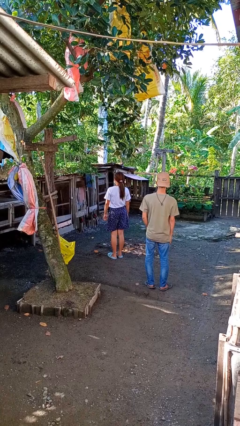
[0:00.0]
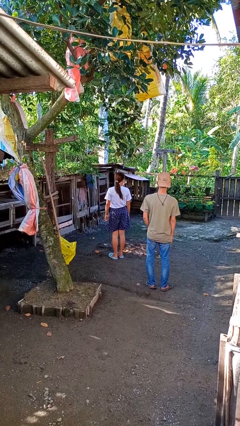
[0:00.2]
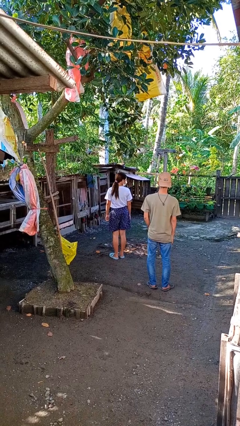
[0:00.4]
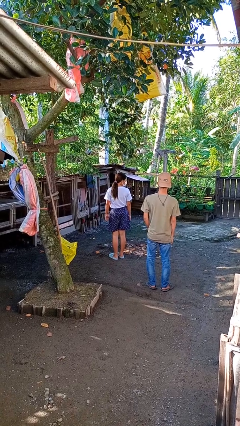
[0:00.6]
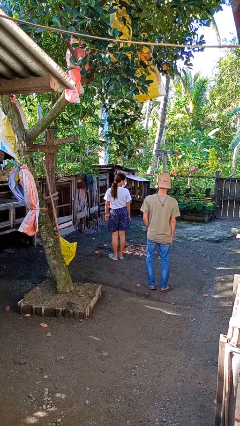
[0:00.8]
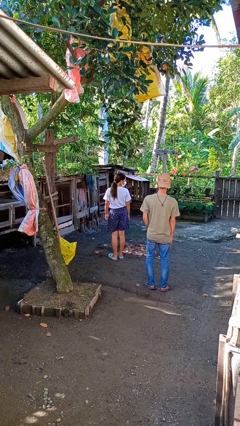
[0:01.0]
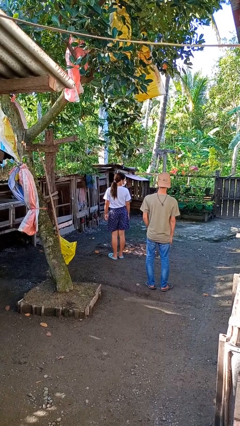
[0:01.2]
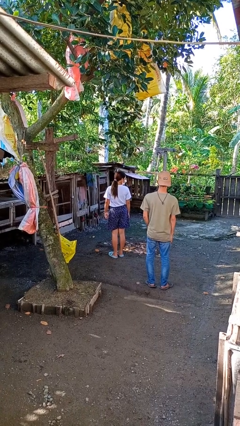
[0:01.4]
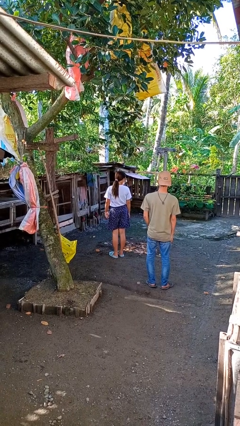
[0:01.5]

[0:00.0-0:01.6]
person looks over shoulder

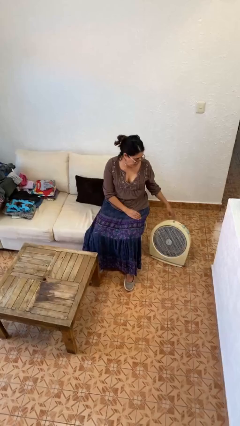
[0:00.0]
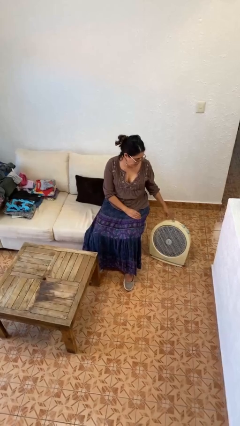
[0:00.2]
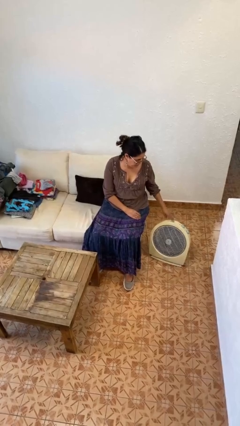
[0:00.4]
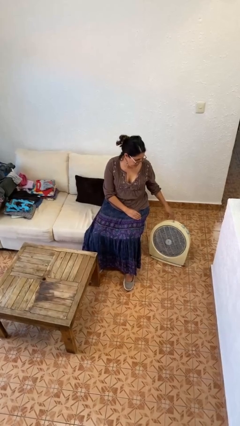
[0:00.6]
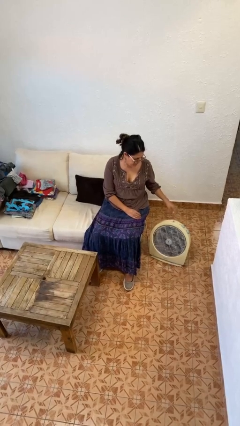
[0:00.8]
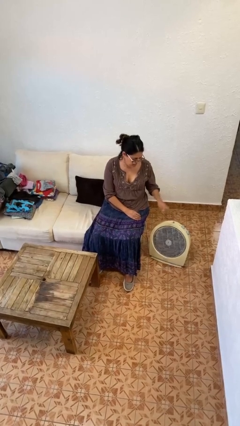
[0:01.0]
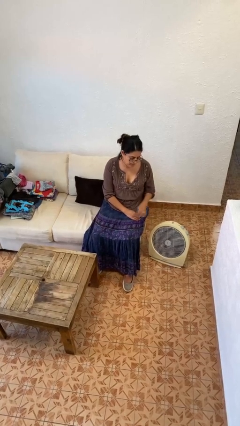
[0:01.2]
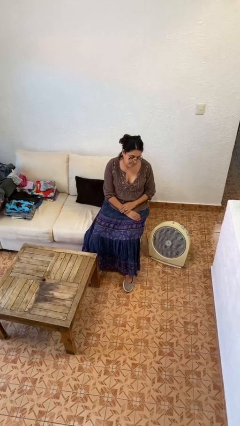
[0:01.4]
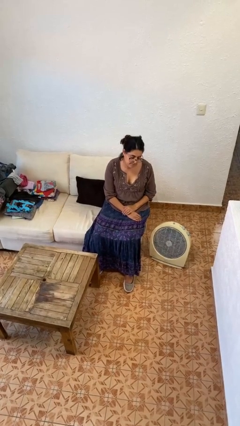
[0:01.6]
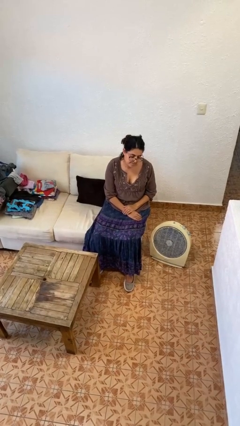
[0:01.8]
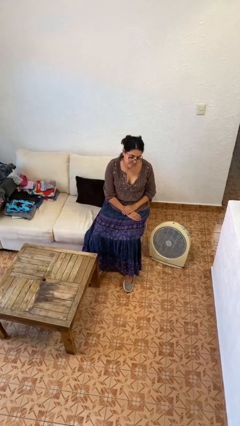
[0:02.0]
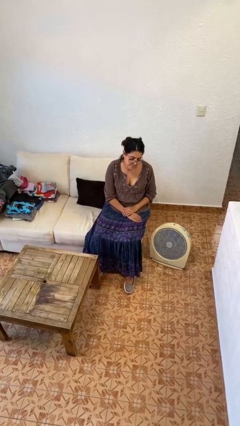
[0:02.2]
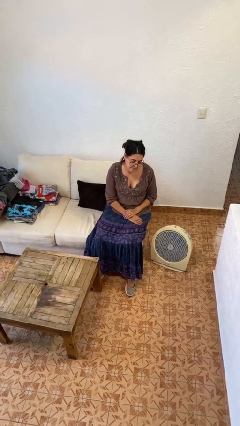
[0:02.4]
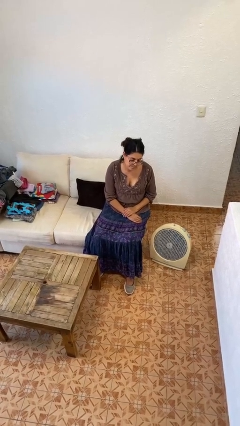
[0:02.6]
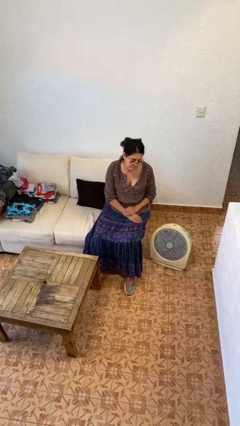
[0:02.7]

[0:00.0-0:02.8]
person turns on fan

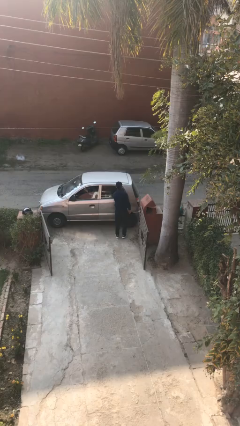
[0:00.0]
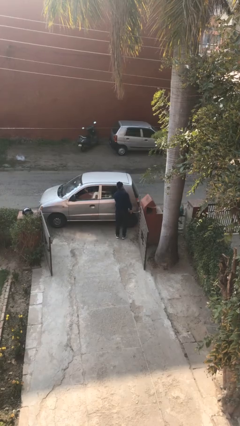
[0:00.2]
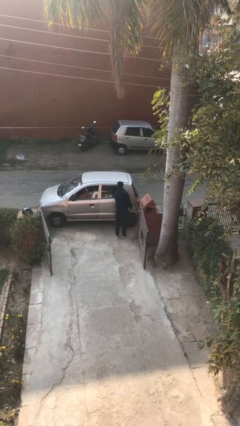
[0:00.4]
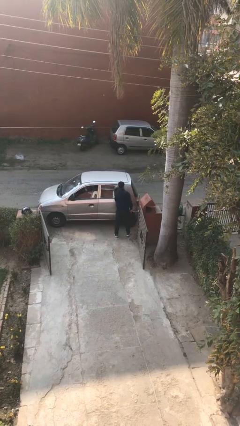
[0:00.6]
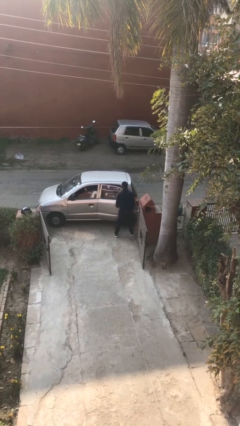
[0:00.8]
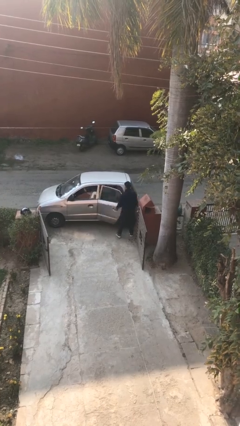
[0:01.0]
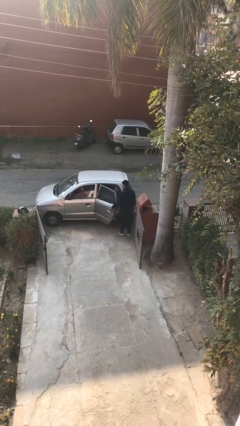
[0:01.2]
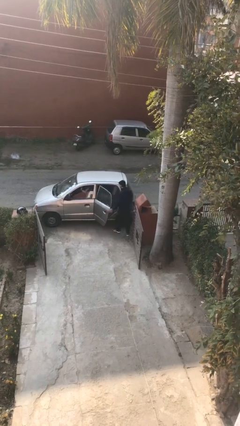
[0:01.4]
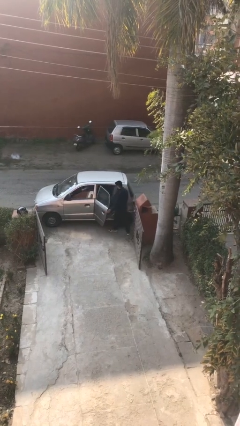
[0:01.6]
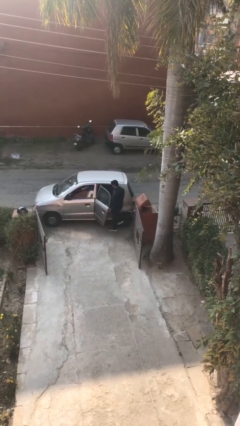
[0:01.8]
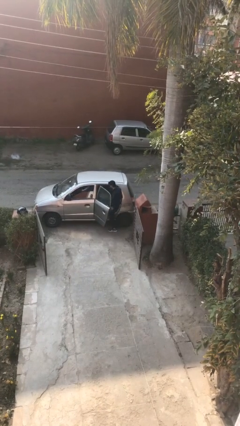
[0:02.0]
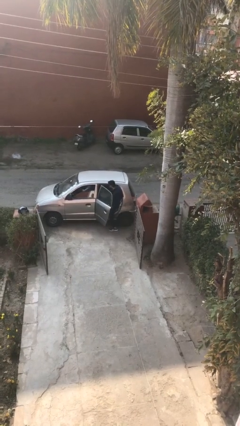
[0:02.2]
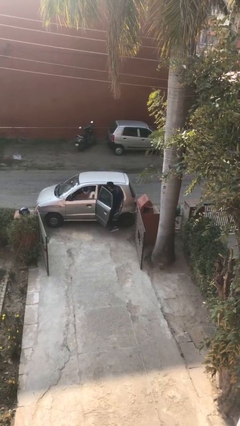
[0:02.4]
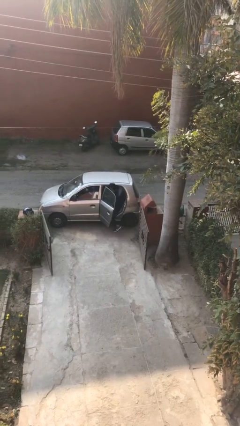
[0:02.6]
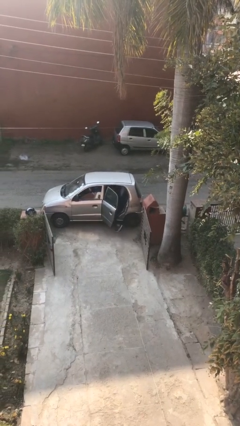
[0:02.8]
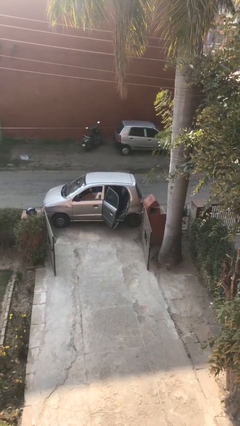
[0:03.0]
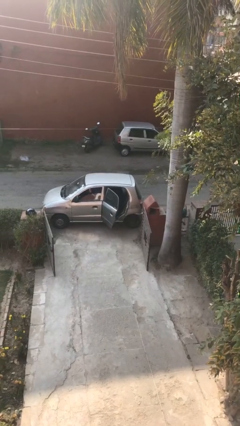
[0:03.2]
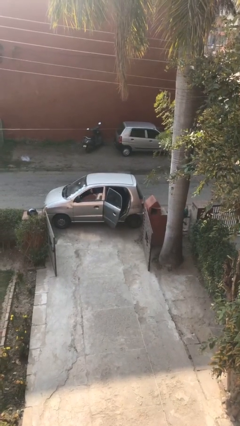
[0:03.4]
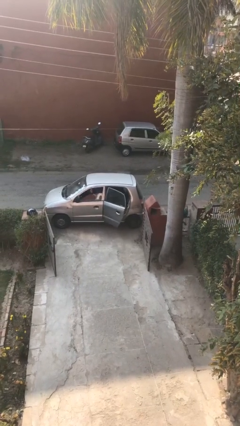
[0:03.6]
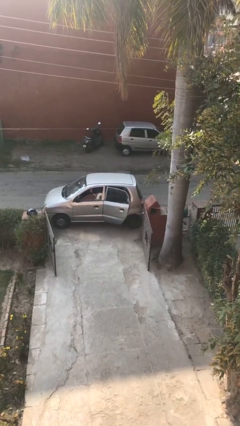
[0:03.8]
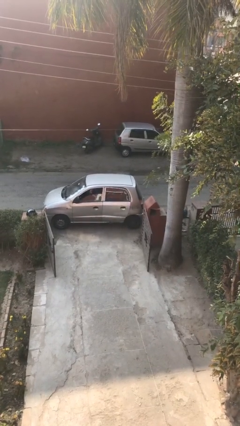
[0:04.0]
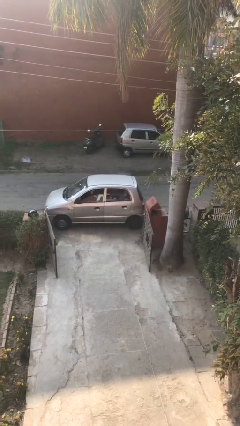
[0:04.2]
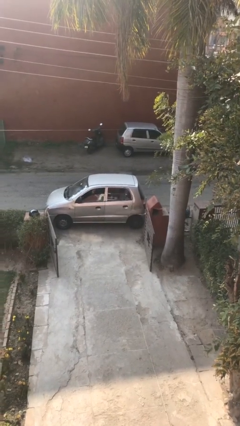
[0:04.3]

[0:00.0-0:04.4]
car picks up person

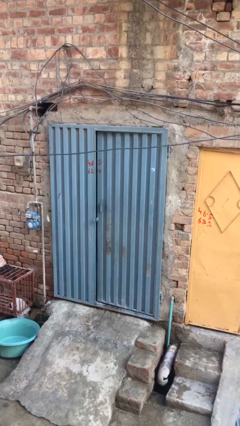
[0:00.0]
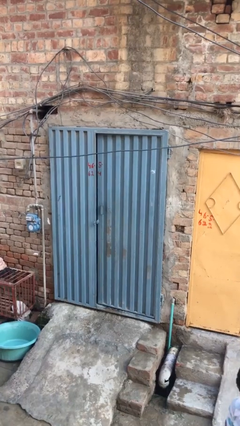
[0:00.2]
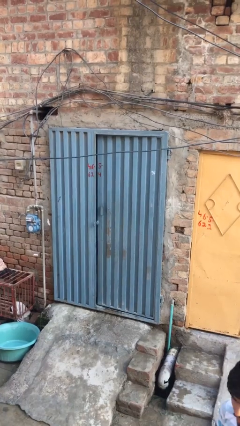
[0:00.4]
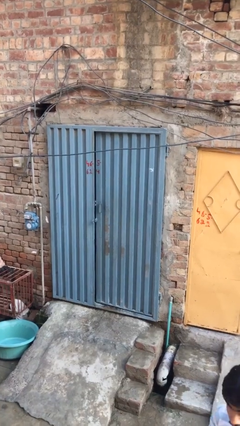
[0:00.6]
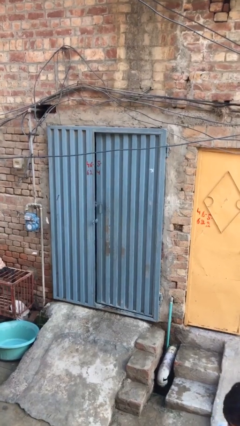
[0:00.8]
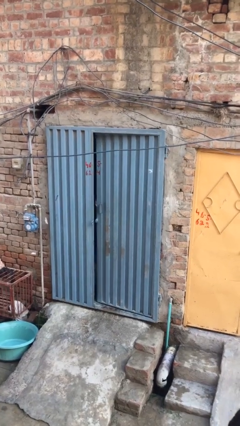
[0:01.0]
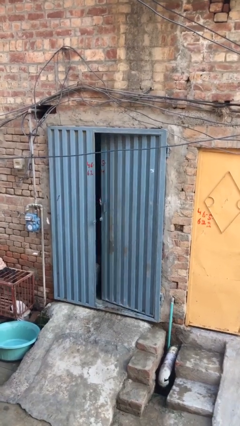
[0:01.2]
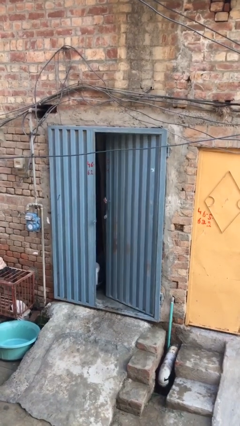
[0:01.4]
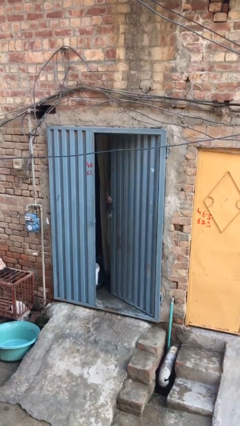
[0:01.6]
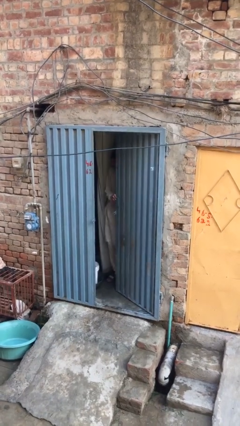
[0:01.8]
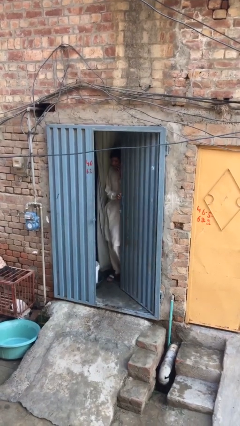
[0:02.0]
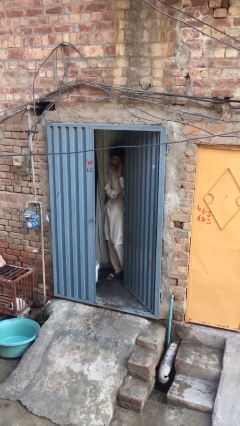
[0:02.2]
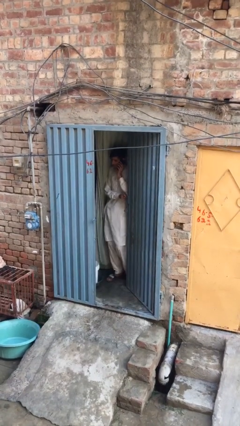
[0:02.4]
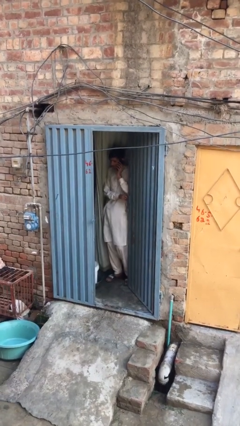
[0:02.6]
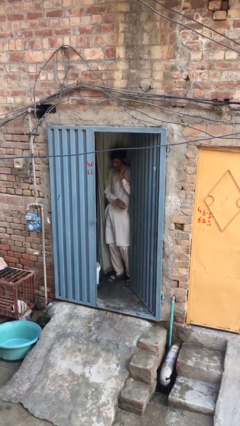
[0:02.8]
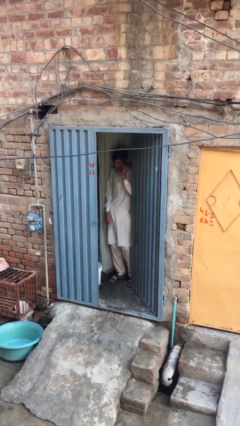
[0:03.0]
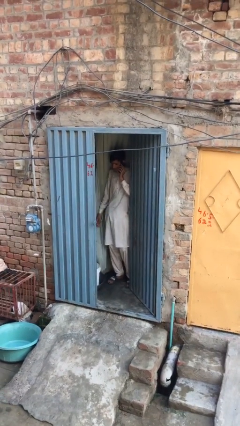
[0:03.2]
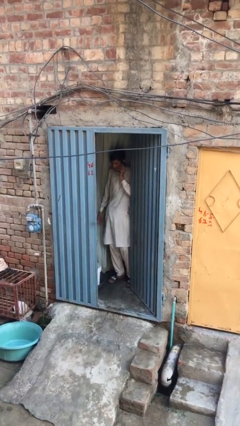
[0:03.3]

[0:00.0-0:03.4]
person opens facility door

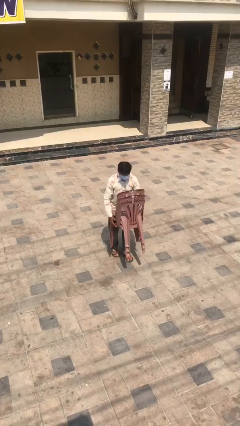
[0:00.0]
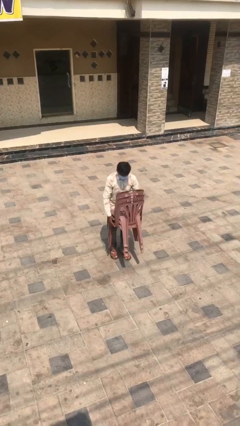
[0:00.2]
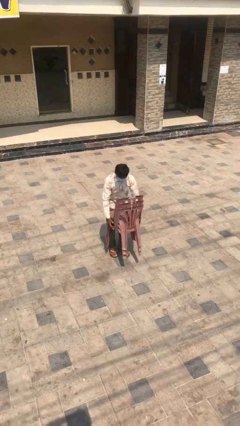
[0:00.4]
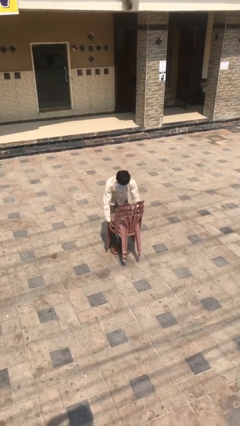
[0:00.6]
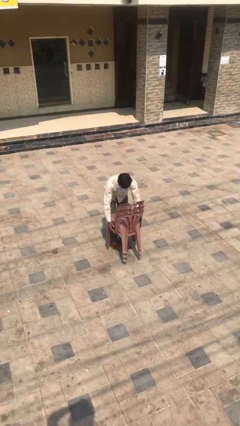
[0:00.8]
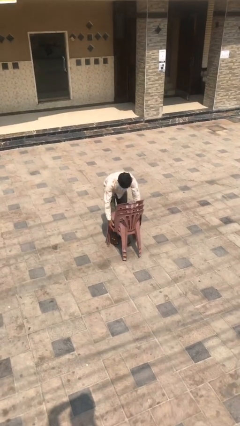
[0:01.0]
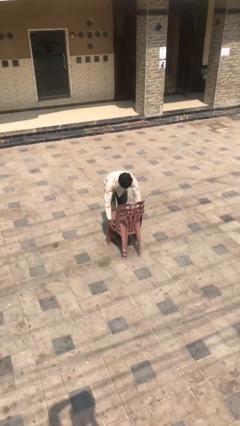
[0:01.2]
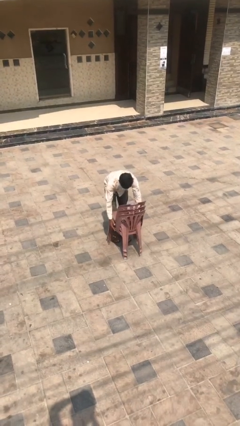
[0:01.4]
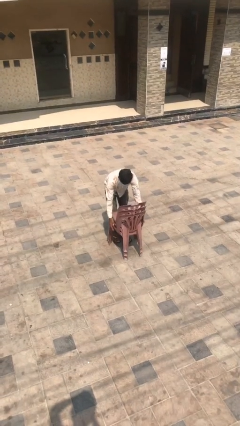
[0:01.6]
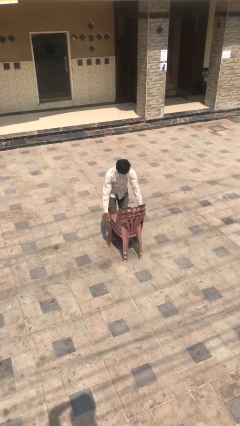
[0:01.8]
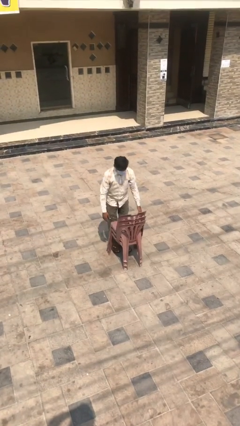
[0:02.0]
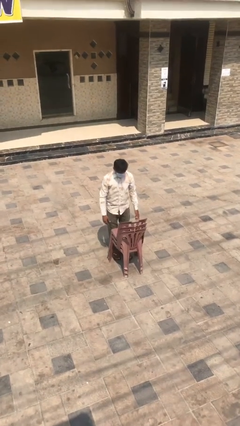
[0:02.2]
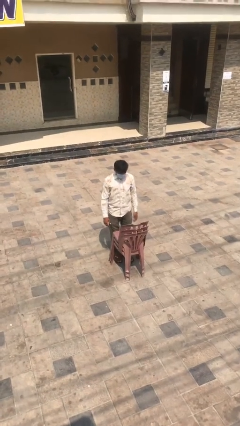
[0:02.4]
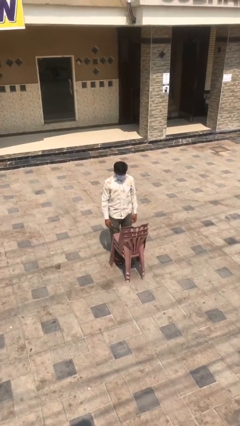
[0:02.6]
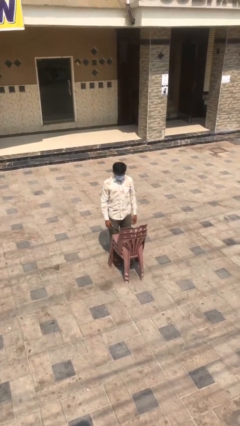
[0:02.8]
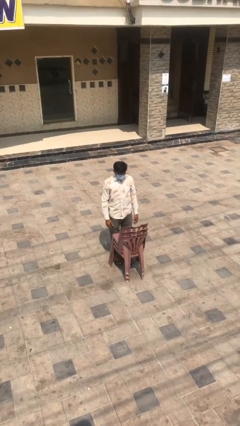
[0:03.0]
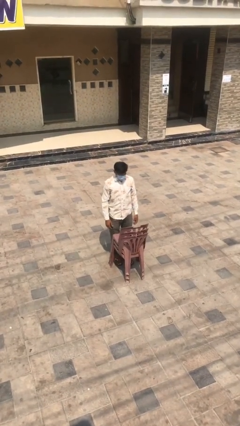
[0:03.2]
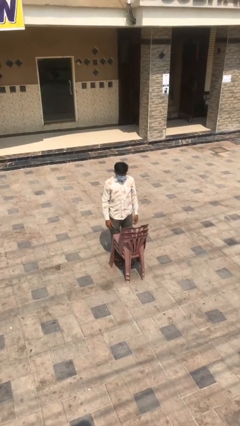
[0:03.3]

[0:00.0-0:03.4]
person puts down object on floor

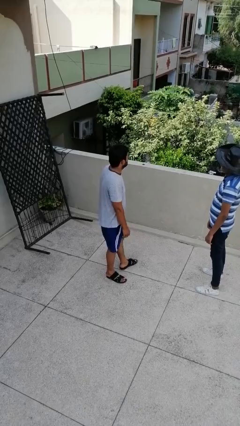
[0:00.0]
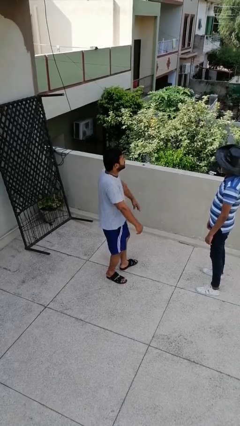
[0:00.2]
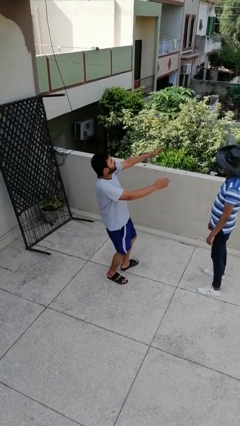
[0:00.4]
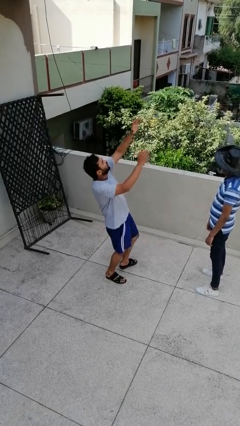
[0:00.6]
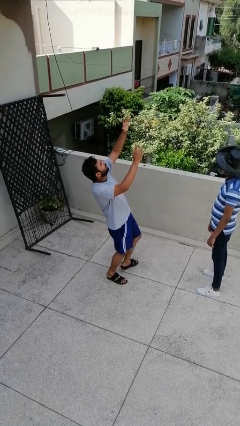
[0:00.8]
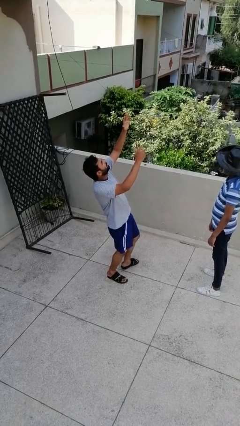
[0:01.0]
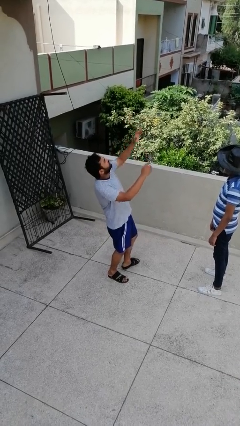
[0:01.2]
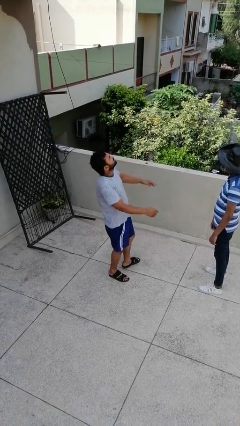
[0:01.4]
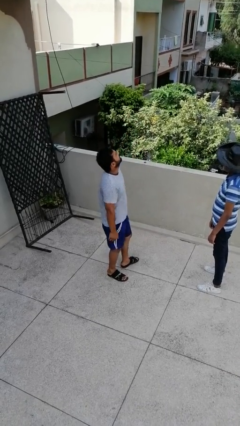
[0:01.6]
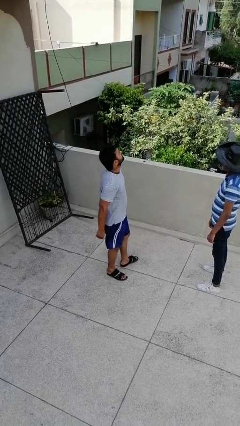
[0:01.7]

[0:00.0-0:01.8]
person laughs with person

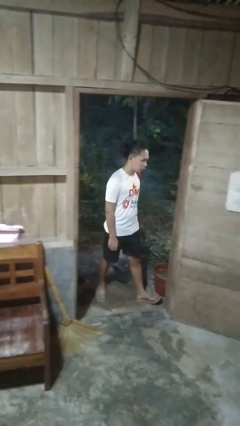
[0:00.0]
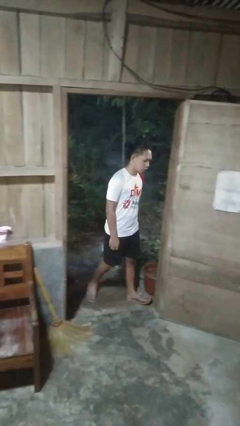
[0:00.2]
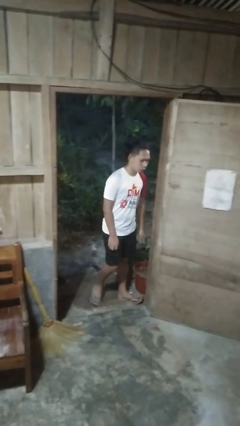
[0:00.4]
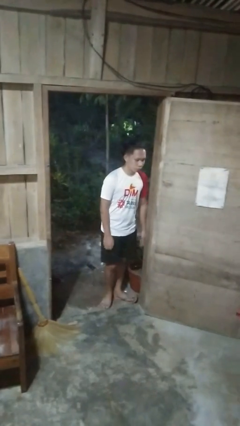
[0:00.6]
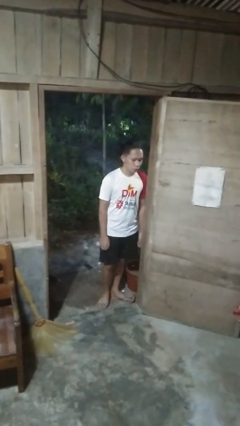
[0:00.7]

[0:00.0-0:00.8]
person bumps into wall
